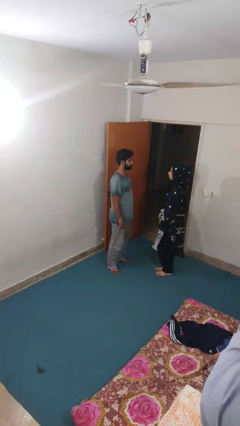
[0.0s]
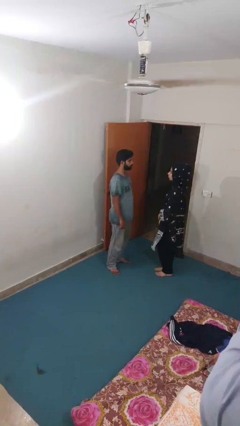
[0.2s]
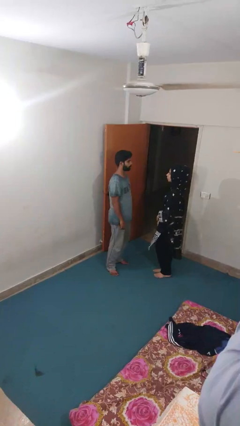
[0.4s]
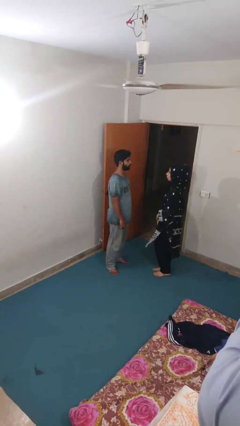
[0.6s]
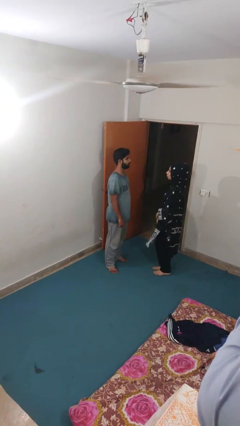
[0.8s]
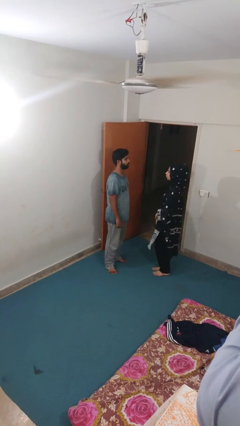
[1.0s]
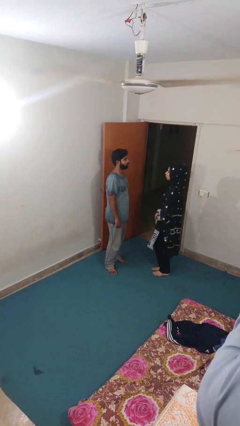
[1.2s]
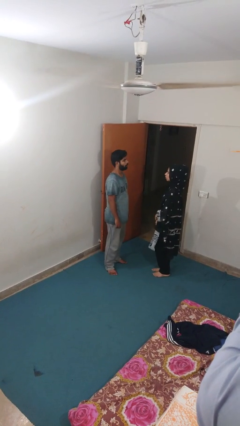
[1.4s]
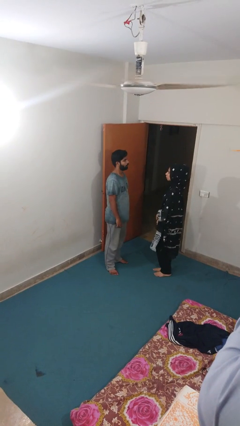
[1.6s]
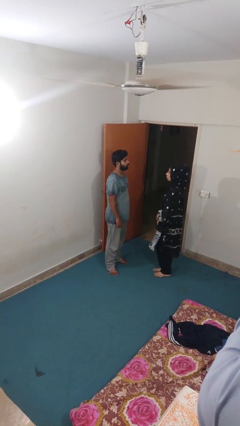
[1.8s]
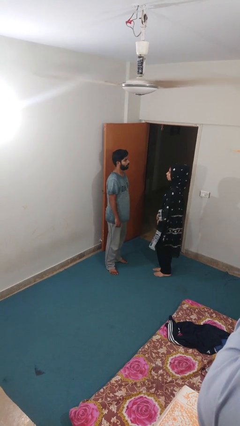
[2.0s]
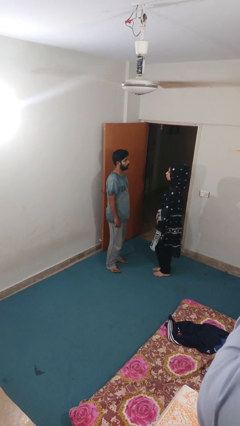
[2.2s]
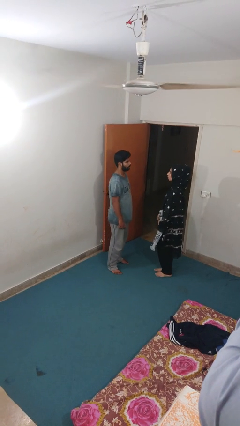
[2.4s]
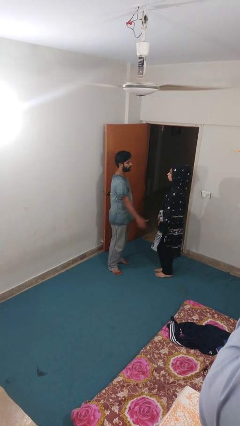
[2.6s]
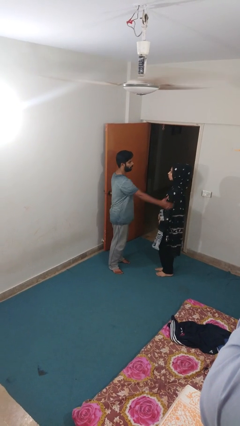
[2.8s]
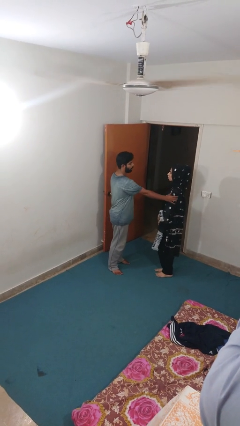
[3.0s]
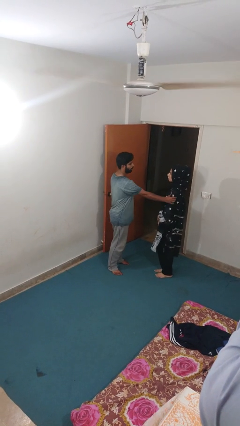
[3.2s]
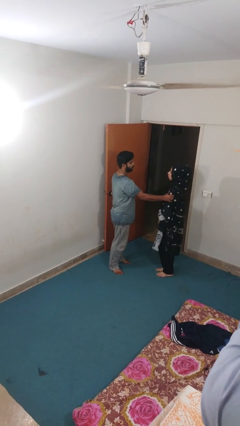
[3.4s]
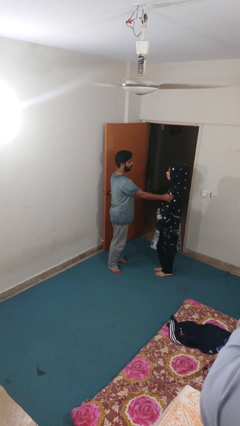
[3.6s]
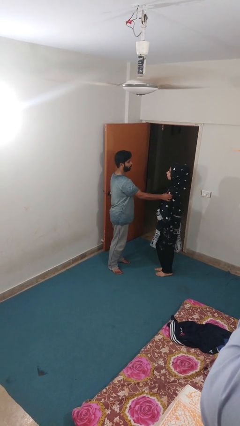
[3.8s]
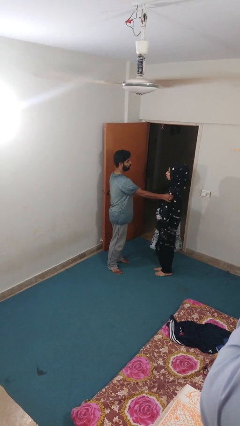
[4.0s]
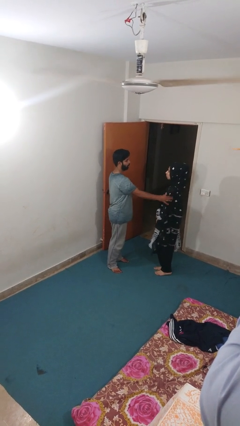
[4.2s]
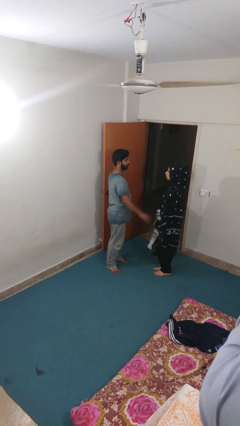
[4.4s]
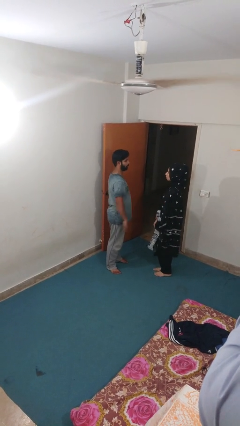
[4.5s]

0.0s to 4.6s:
person grabs person by bicep

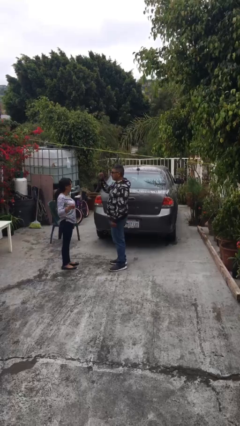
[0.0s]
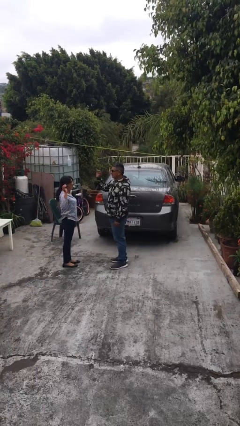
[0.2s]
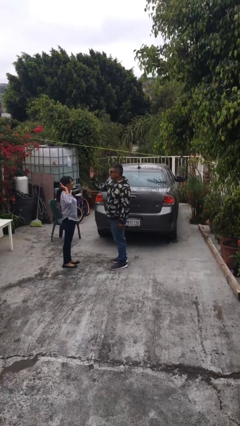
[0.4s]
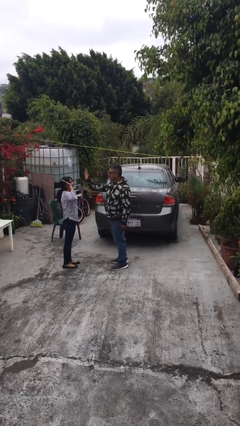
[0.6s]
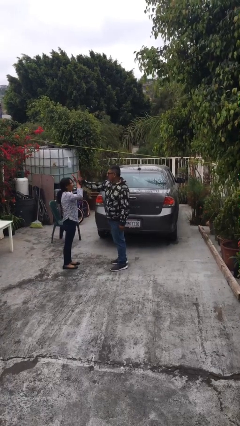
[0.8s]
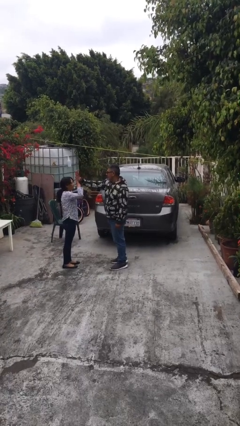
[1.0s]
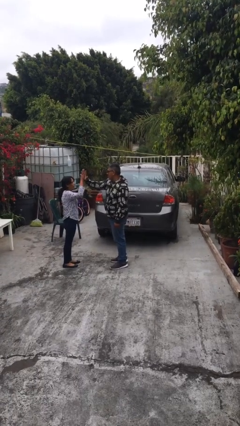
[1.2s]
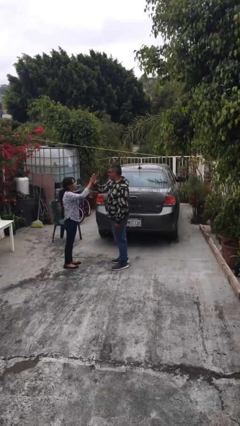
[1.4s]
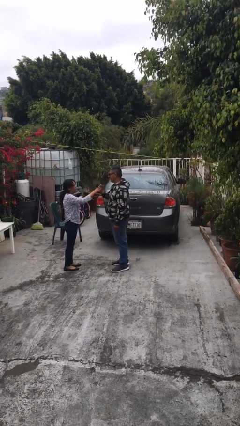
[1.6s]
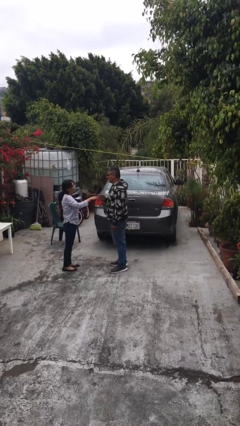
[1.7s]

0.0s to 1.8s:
person highfives hand

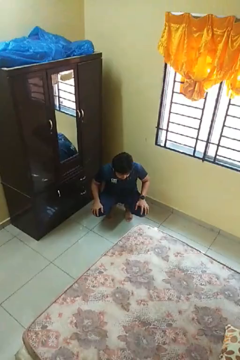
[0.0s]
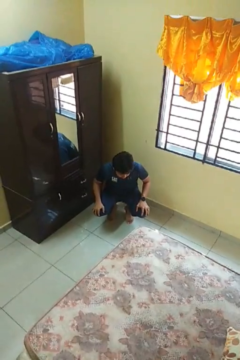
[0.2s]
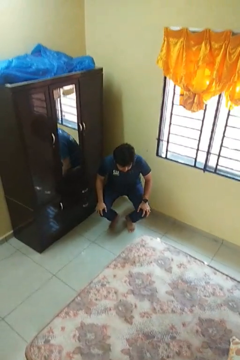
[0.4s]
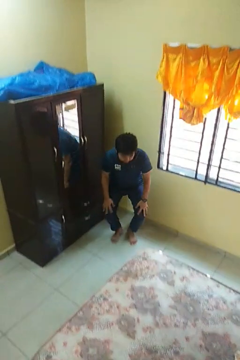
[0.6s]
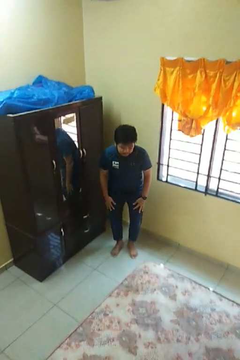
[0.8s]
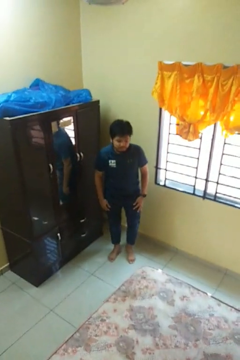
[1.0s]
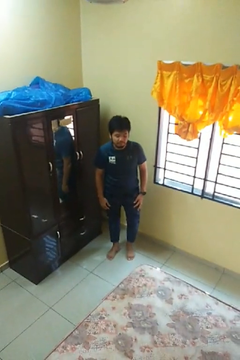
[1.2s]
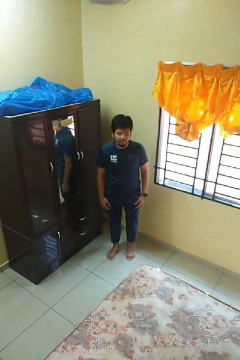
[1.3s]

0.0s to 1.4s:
person stands up

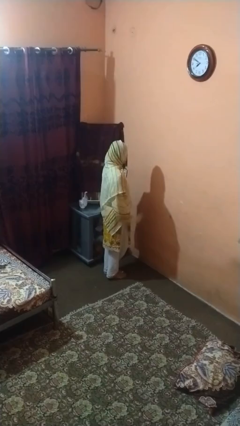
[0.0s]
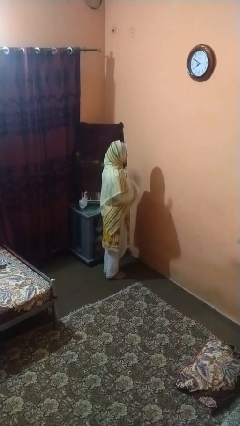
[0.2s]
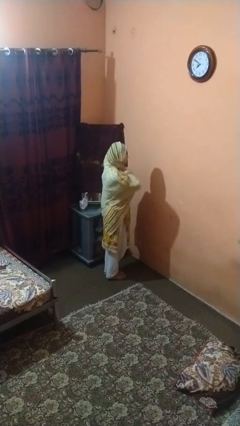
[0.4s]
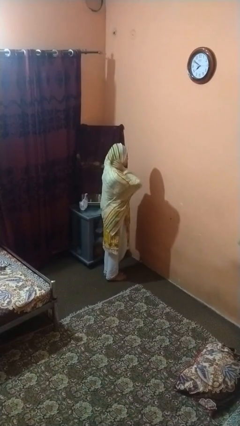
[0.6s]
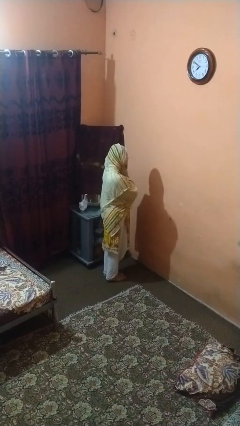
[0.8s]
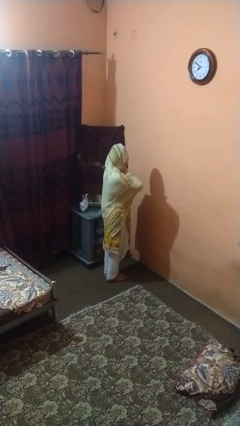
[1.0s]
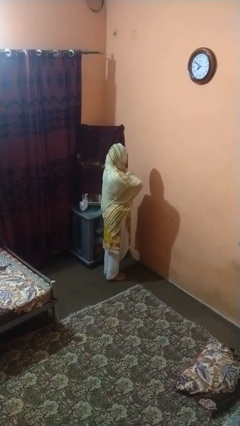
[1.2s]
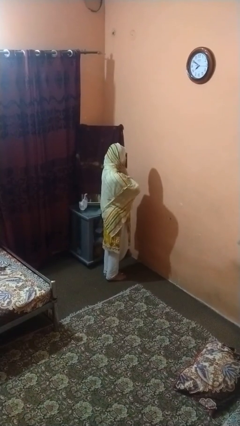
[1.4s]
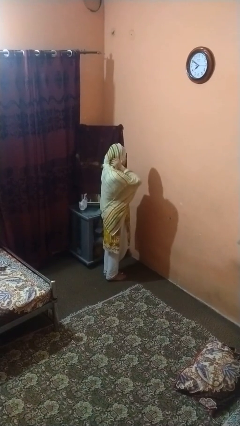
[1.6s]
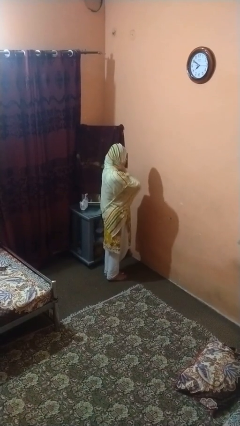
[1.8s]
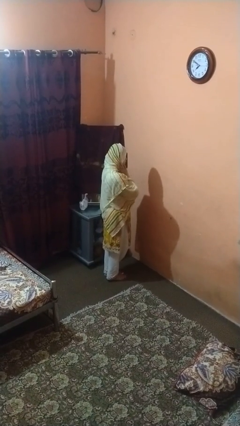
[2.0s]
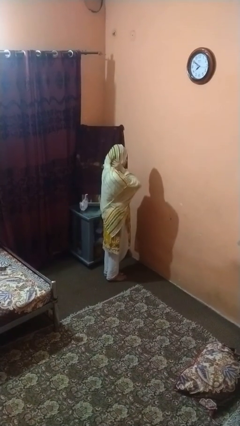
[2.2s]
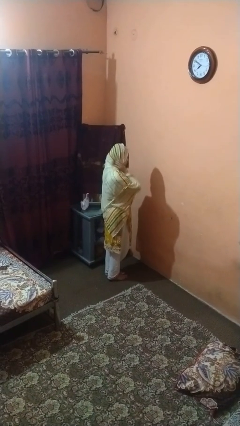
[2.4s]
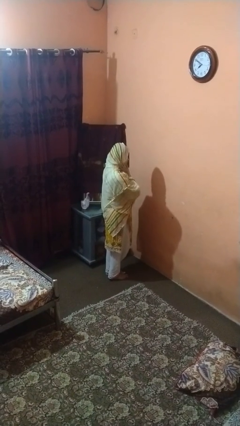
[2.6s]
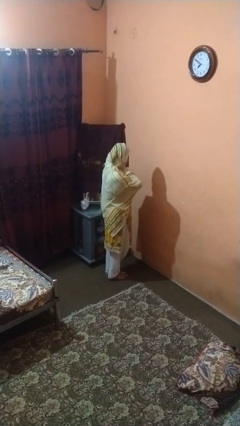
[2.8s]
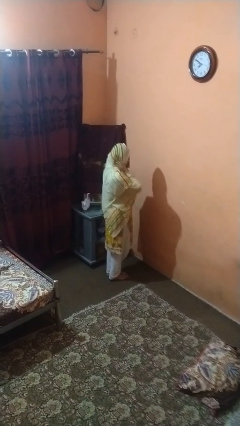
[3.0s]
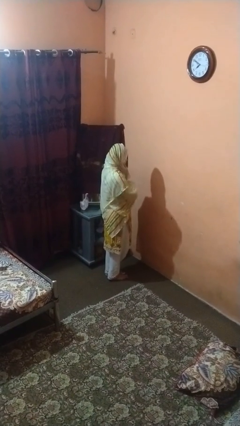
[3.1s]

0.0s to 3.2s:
person rubs neck

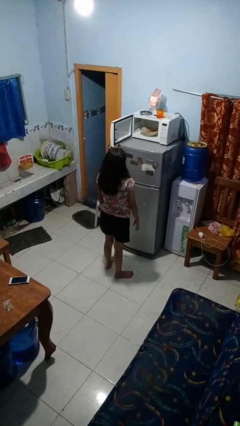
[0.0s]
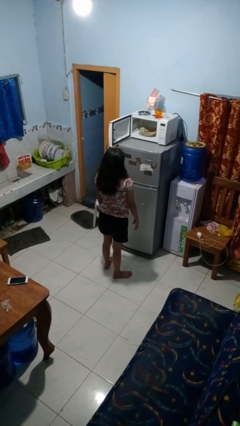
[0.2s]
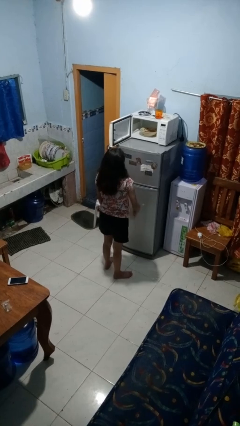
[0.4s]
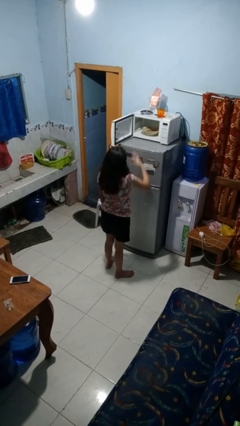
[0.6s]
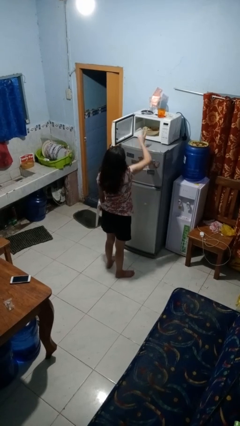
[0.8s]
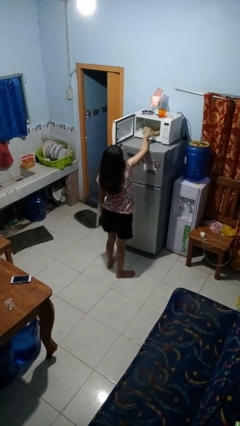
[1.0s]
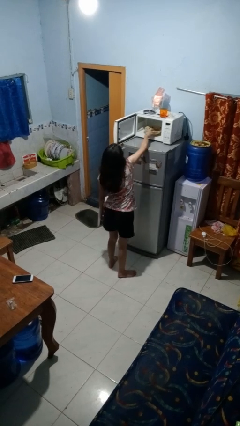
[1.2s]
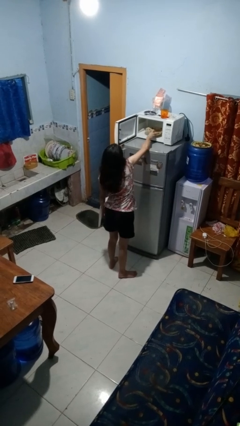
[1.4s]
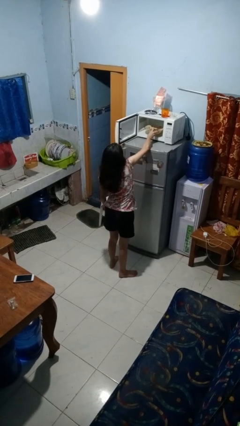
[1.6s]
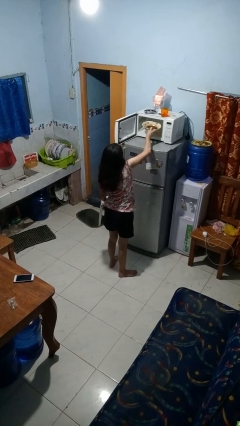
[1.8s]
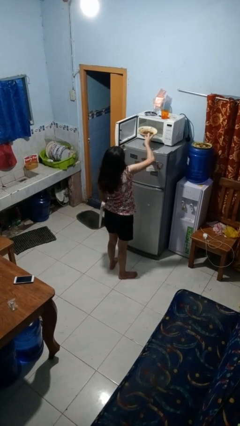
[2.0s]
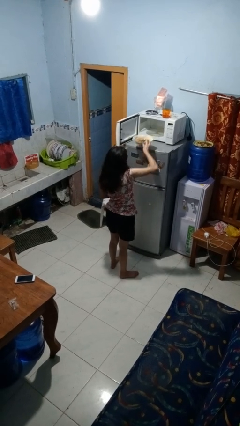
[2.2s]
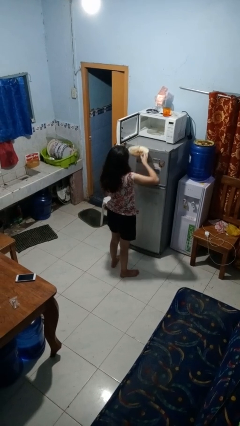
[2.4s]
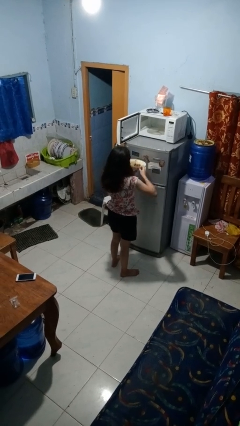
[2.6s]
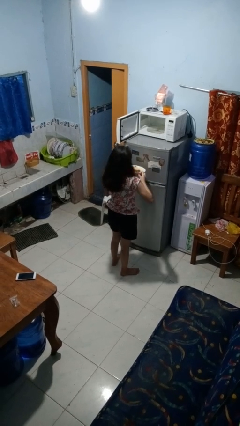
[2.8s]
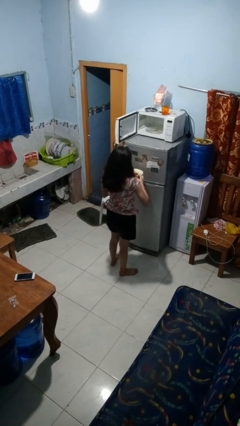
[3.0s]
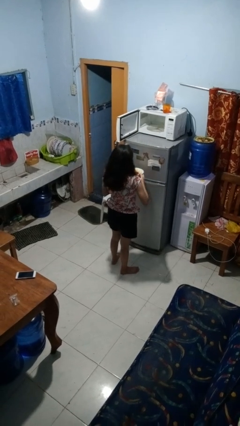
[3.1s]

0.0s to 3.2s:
person takes object from microwave

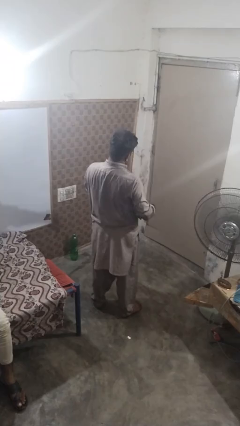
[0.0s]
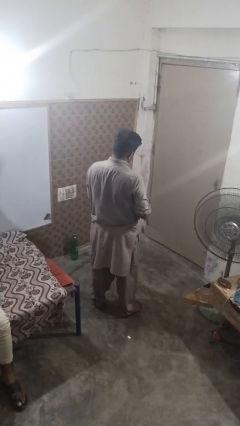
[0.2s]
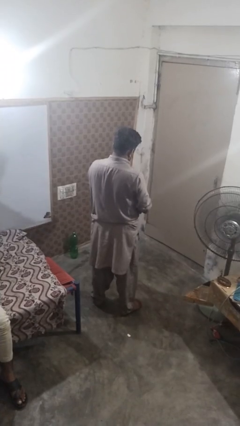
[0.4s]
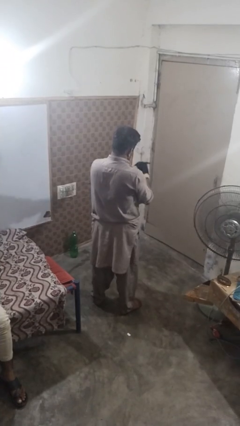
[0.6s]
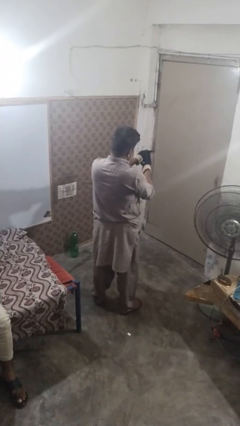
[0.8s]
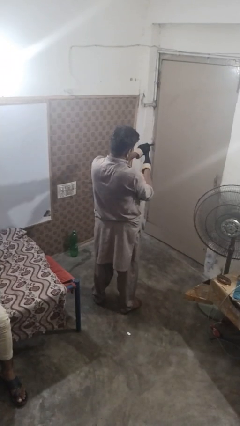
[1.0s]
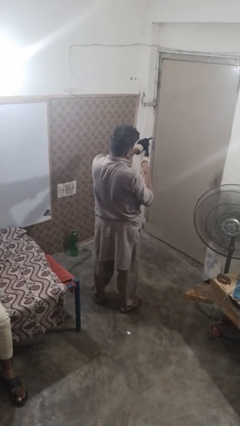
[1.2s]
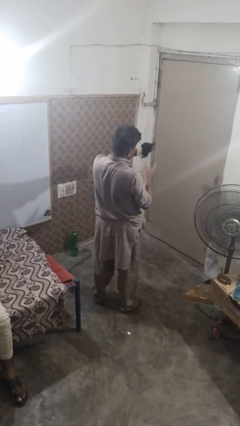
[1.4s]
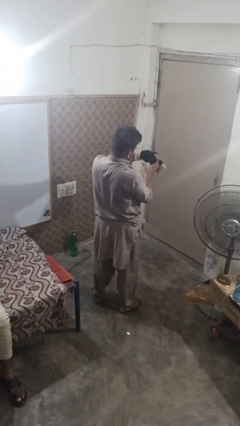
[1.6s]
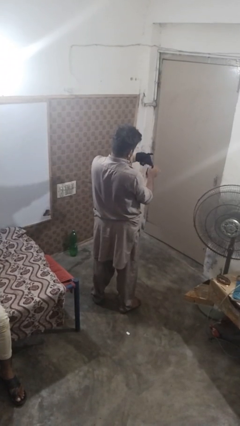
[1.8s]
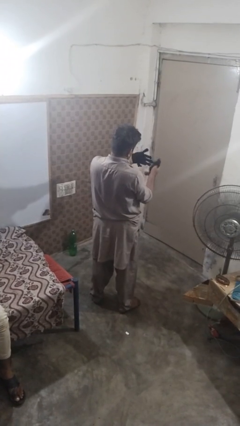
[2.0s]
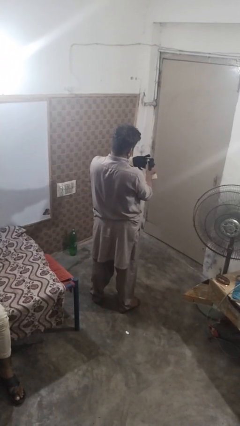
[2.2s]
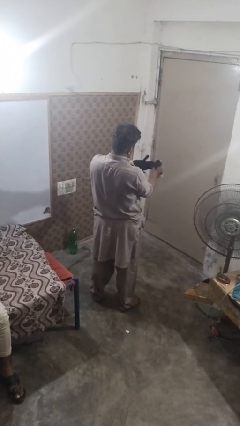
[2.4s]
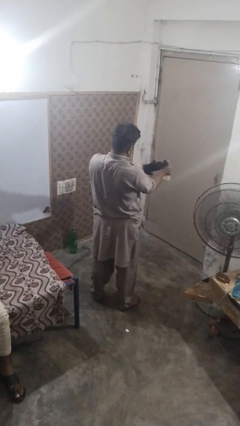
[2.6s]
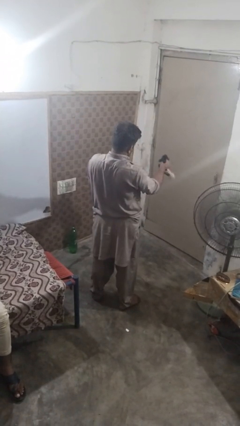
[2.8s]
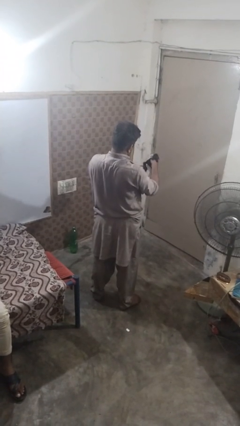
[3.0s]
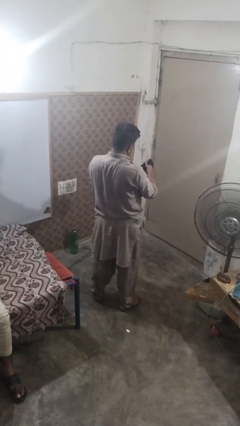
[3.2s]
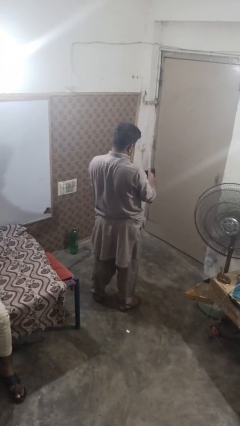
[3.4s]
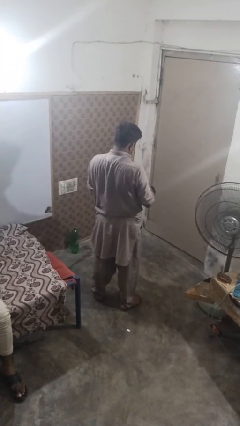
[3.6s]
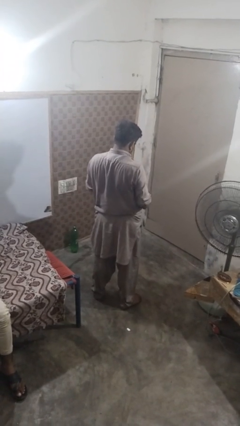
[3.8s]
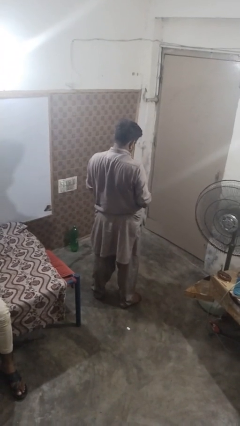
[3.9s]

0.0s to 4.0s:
person takes off gloves
